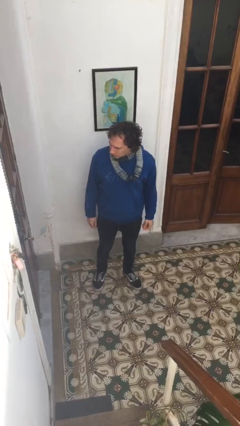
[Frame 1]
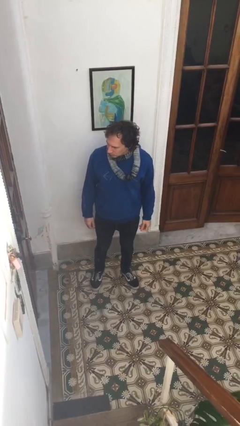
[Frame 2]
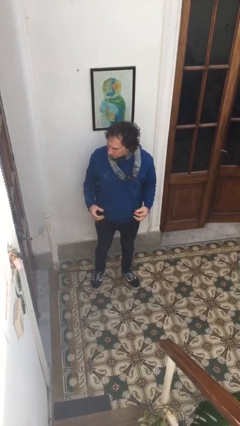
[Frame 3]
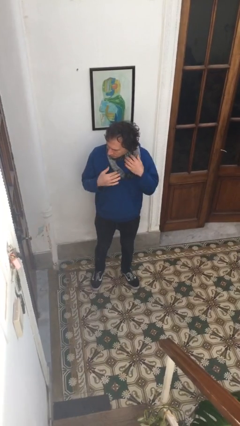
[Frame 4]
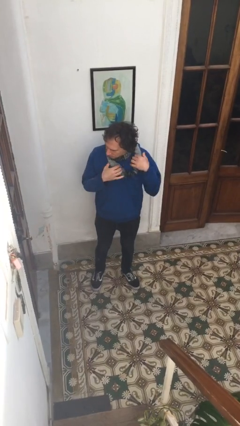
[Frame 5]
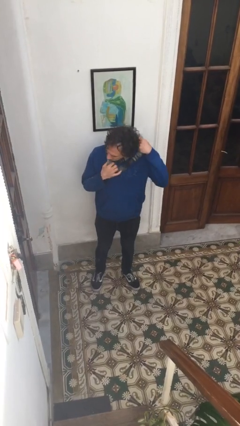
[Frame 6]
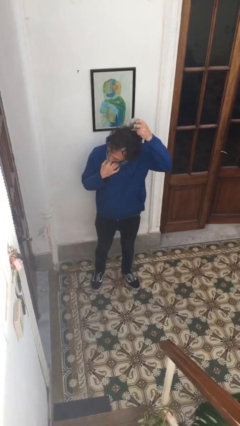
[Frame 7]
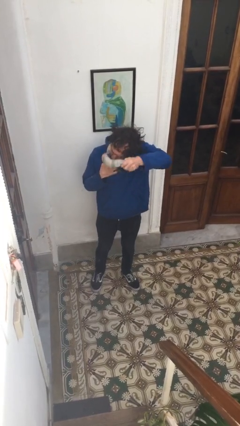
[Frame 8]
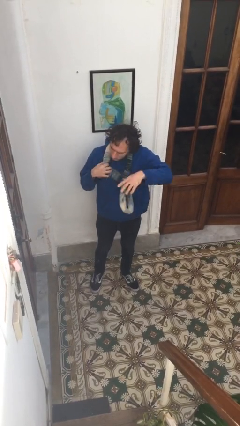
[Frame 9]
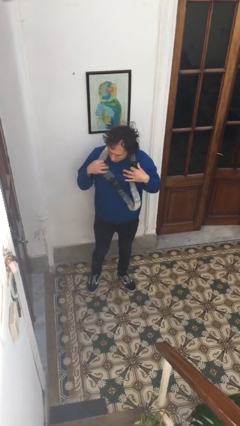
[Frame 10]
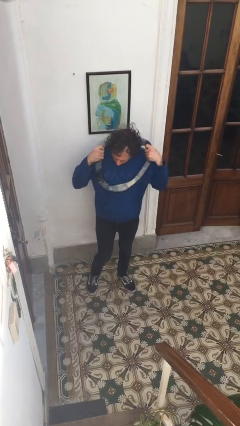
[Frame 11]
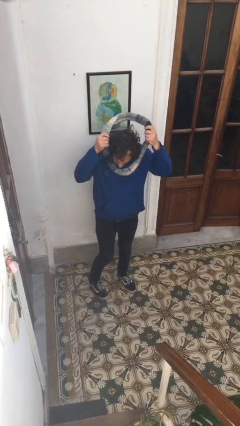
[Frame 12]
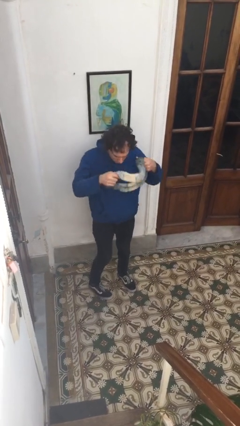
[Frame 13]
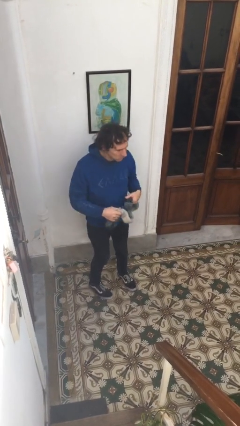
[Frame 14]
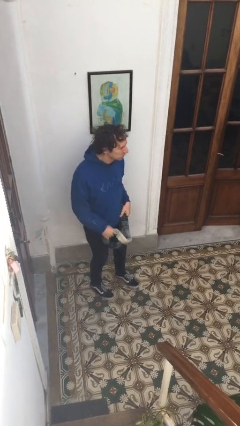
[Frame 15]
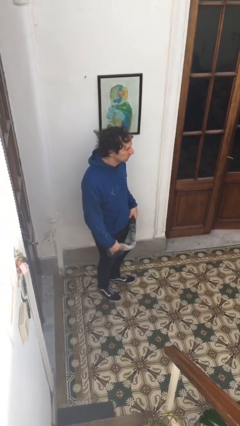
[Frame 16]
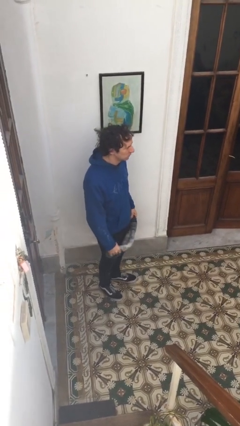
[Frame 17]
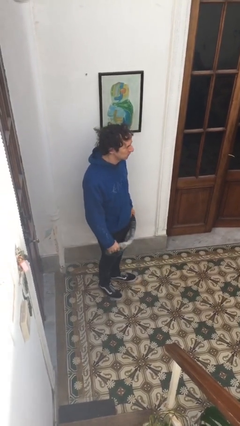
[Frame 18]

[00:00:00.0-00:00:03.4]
person takes off scarf

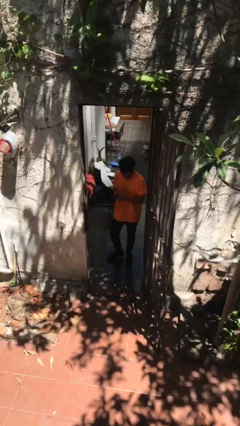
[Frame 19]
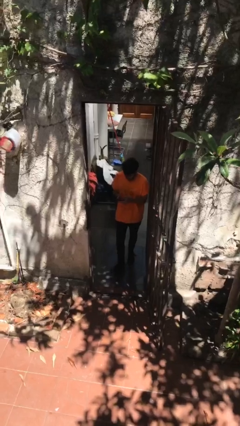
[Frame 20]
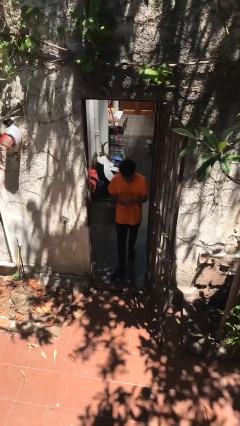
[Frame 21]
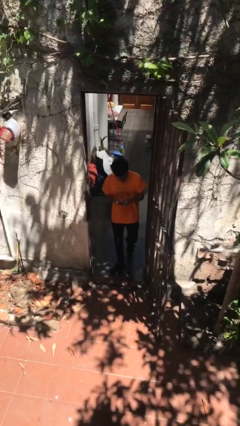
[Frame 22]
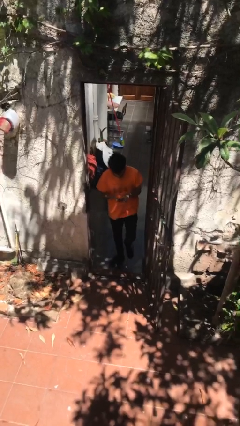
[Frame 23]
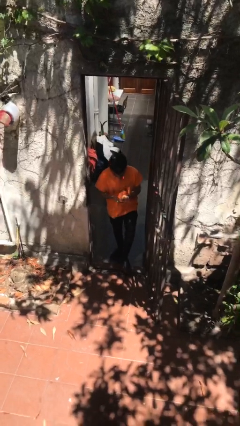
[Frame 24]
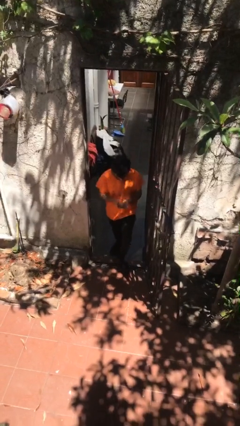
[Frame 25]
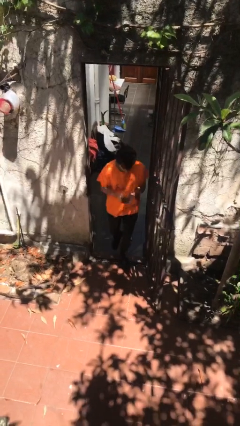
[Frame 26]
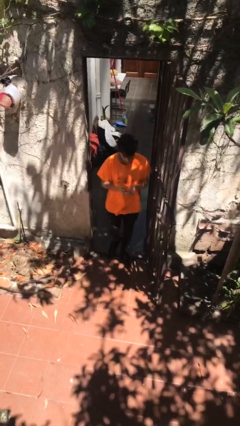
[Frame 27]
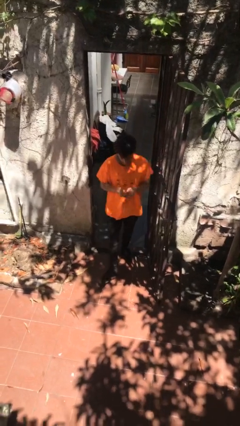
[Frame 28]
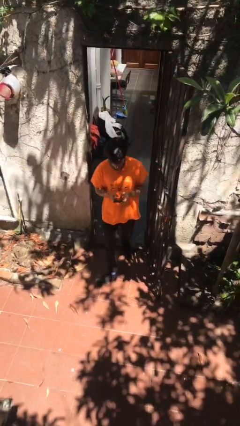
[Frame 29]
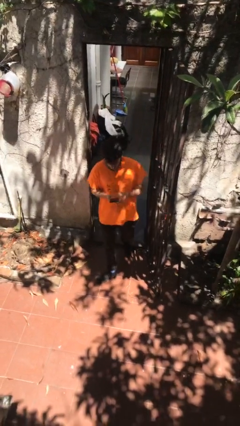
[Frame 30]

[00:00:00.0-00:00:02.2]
person enters scene through structure

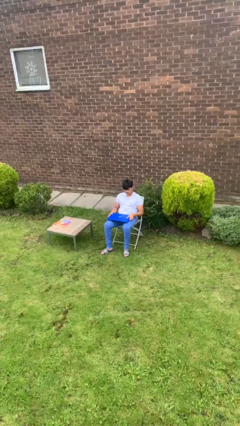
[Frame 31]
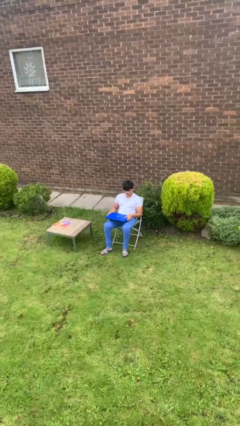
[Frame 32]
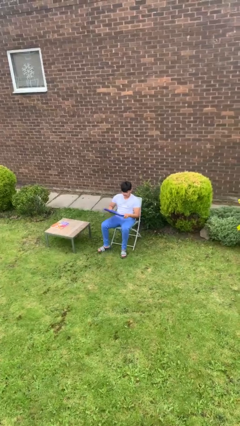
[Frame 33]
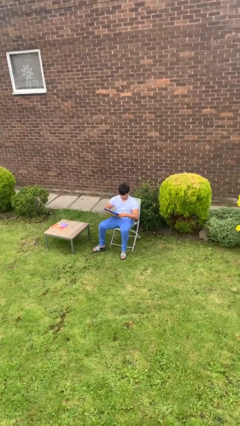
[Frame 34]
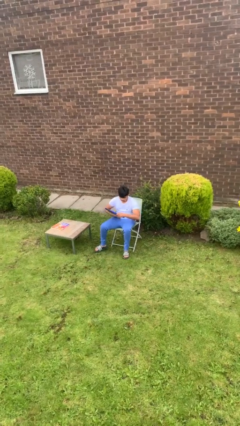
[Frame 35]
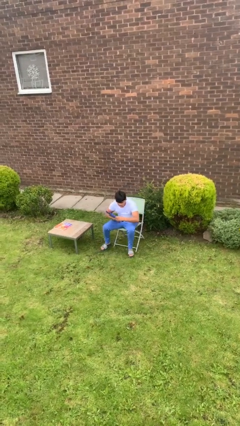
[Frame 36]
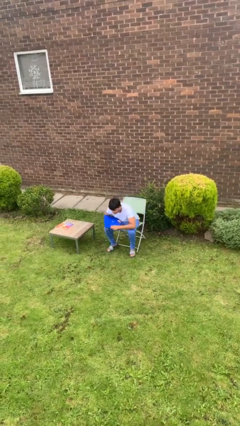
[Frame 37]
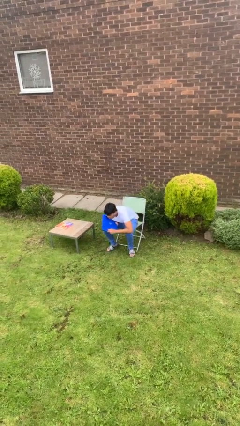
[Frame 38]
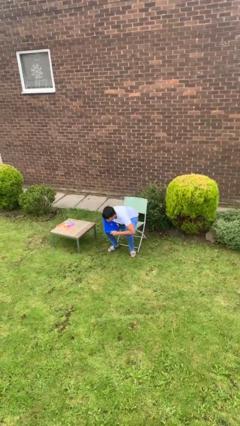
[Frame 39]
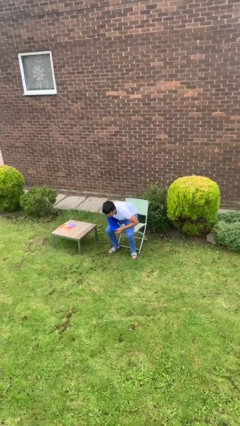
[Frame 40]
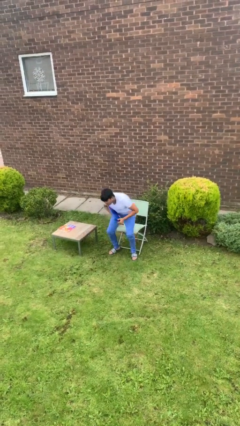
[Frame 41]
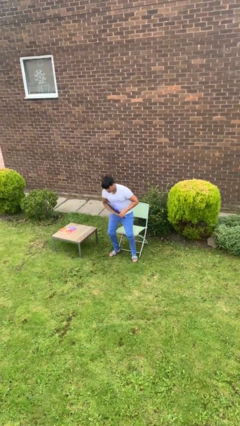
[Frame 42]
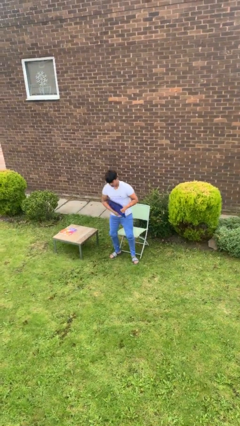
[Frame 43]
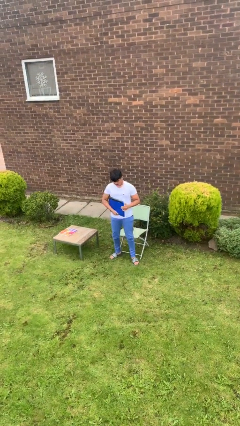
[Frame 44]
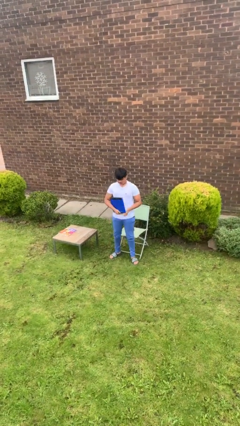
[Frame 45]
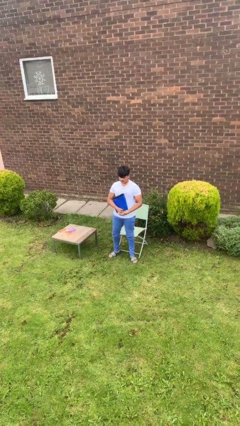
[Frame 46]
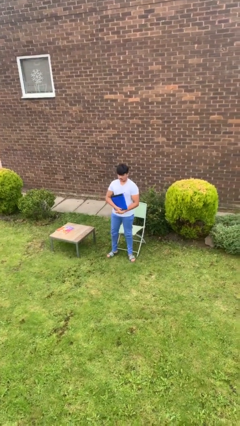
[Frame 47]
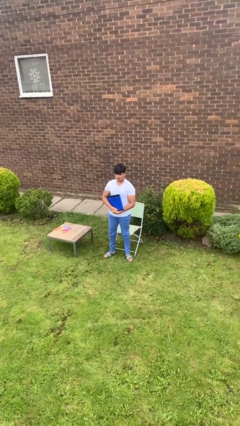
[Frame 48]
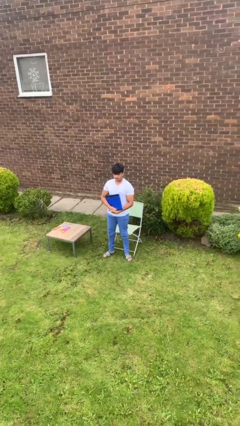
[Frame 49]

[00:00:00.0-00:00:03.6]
person stands up

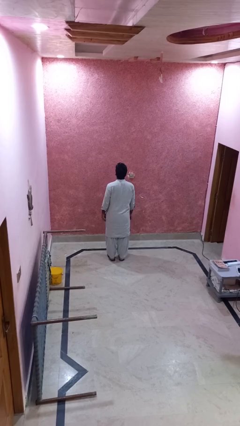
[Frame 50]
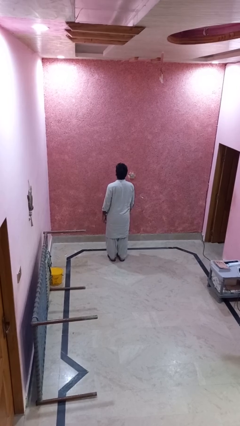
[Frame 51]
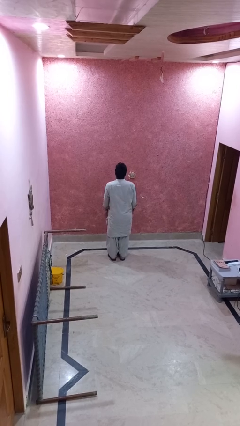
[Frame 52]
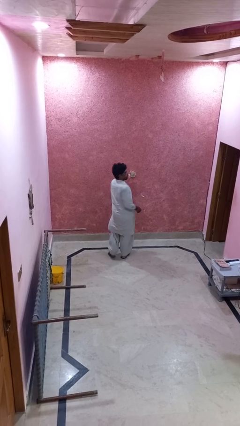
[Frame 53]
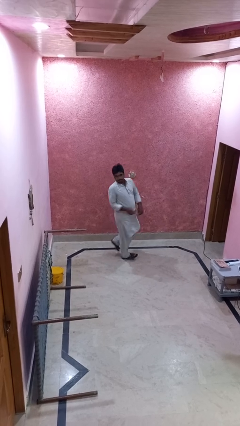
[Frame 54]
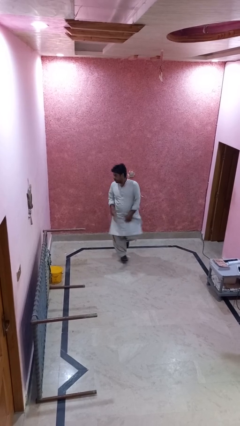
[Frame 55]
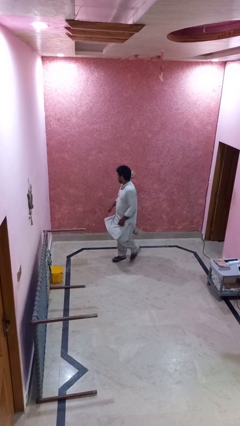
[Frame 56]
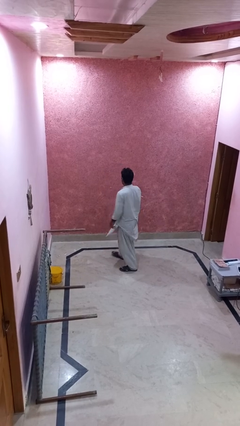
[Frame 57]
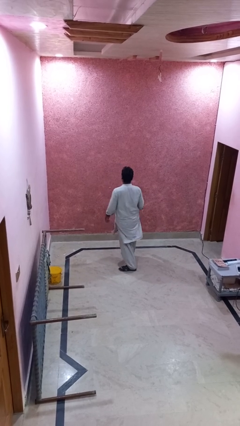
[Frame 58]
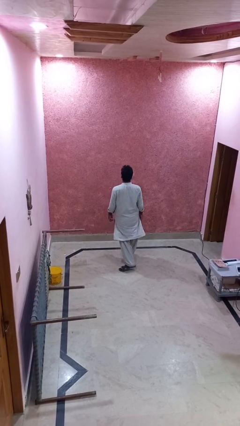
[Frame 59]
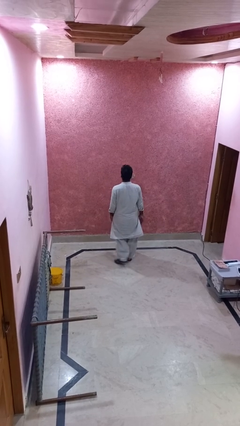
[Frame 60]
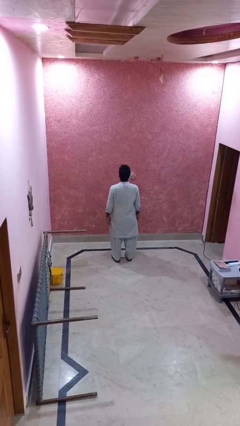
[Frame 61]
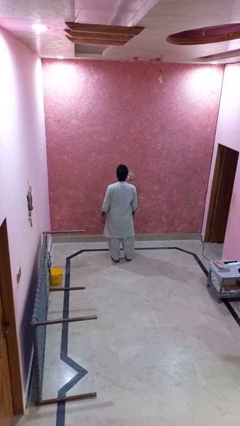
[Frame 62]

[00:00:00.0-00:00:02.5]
person twirls

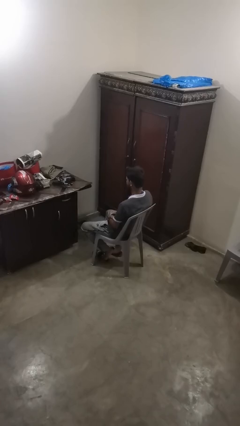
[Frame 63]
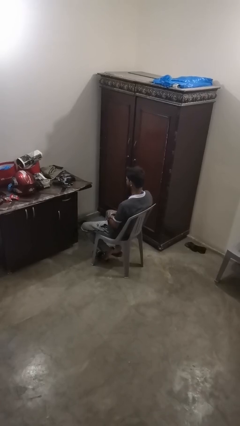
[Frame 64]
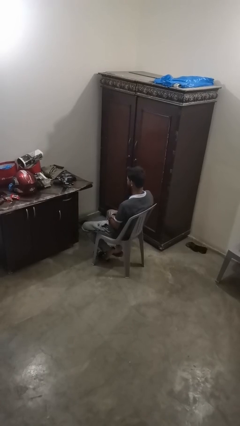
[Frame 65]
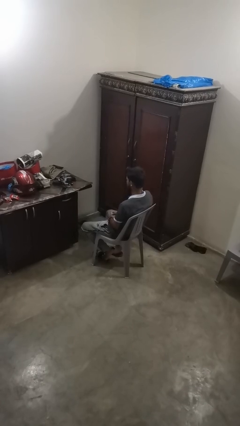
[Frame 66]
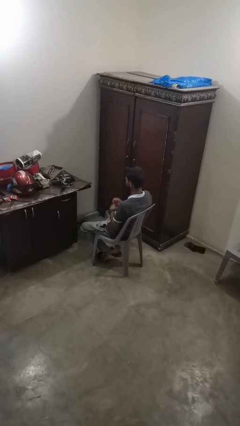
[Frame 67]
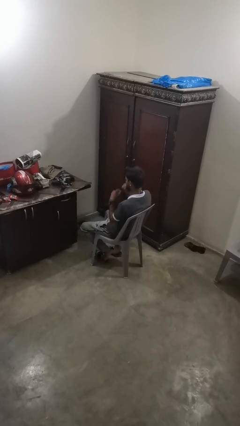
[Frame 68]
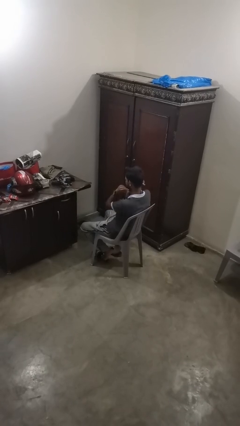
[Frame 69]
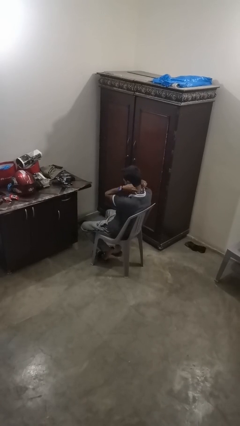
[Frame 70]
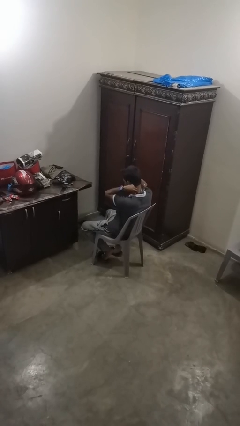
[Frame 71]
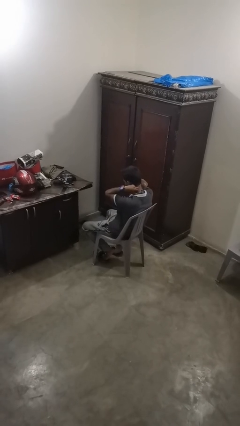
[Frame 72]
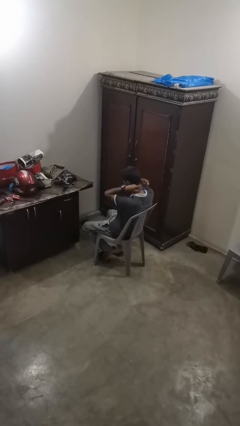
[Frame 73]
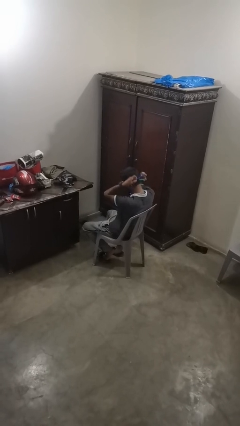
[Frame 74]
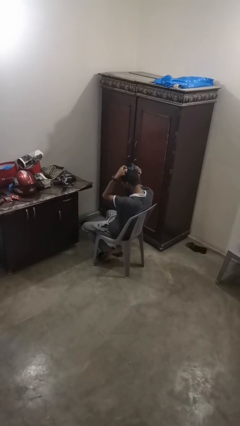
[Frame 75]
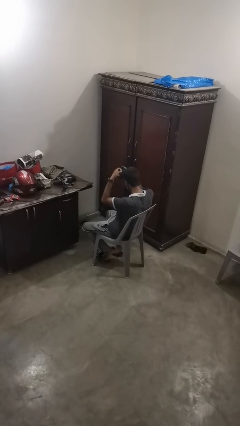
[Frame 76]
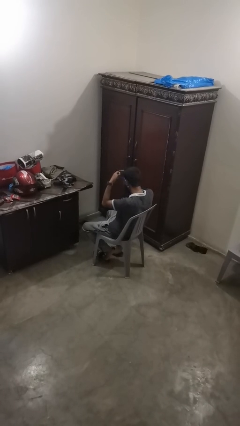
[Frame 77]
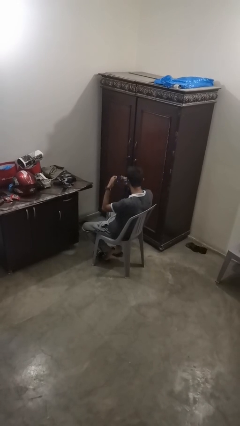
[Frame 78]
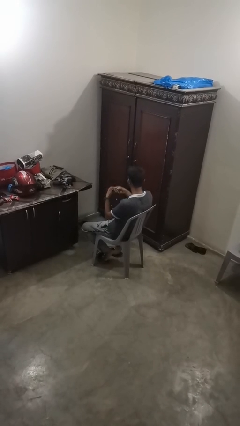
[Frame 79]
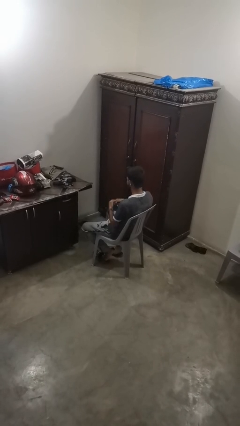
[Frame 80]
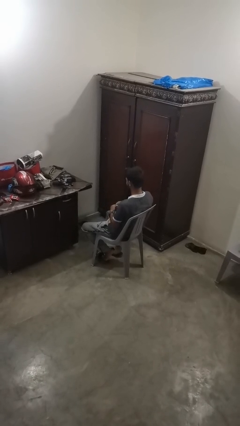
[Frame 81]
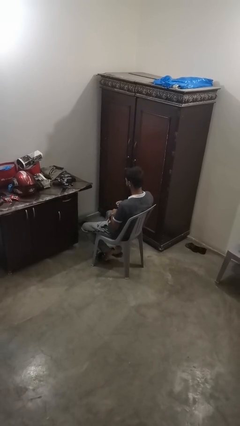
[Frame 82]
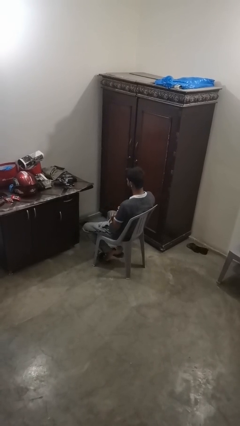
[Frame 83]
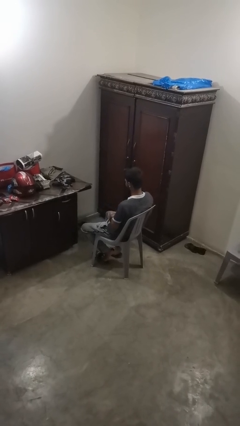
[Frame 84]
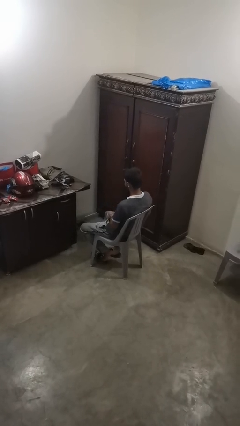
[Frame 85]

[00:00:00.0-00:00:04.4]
person takes off necklace

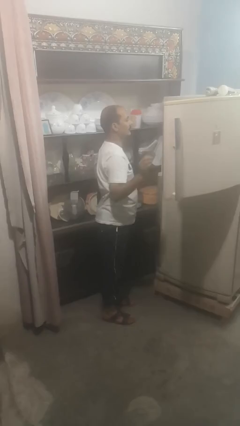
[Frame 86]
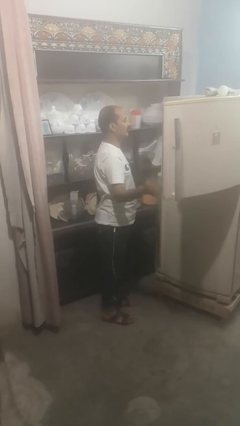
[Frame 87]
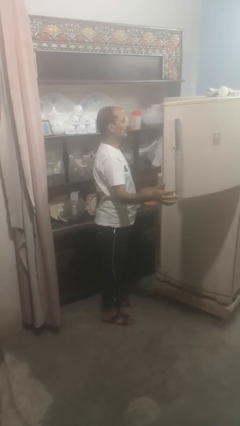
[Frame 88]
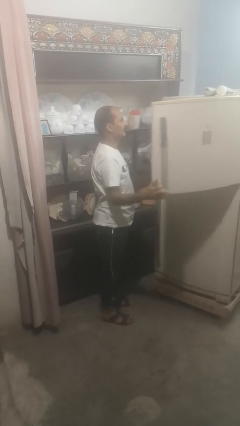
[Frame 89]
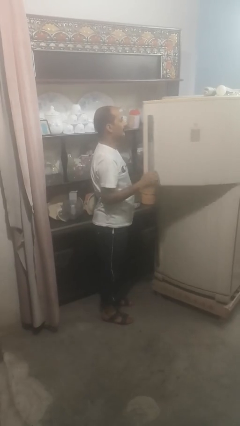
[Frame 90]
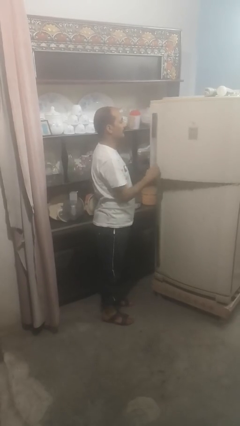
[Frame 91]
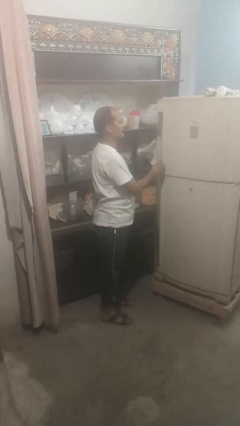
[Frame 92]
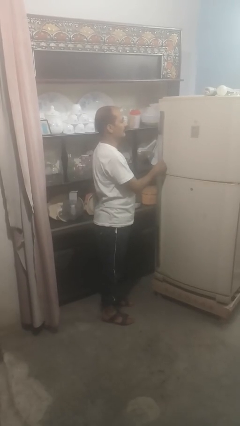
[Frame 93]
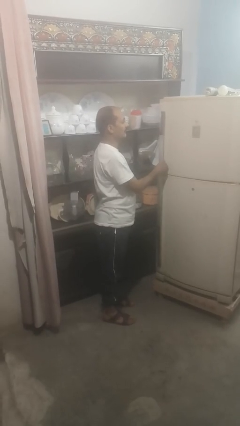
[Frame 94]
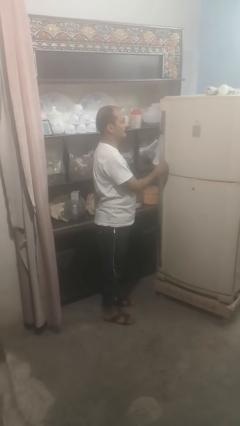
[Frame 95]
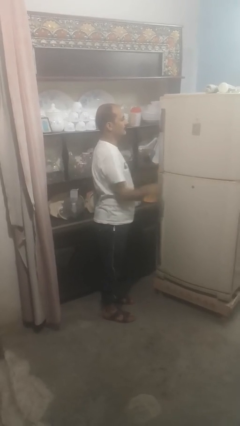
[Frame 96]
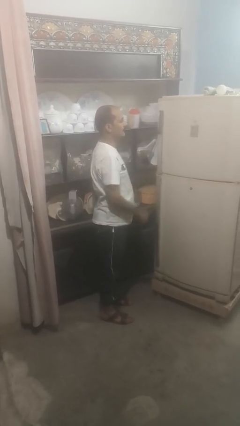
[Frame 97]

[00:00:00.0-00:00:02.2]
person closes refrigerator
